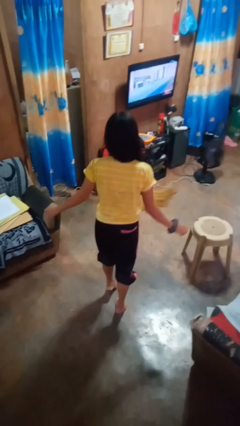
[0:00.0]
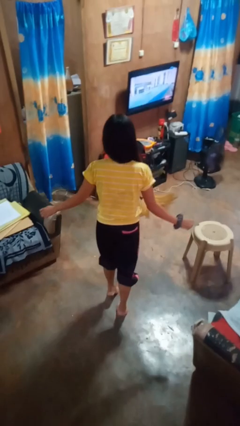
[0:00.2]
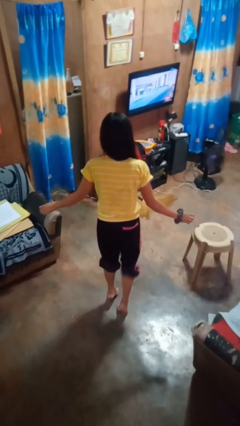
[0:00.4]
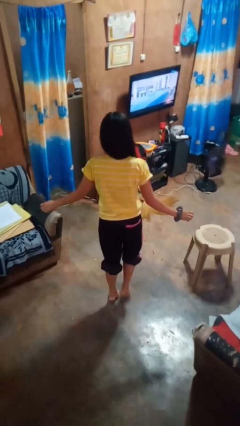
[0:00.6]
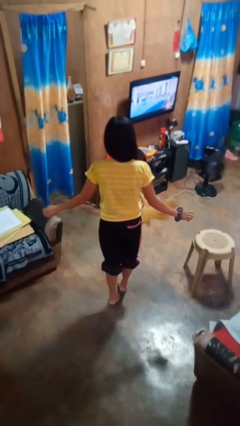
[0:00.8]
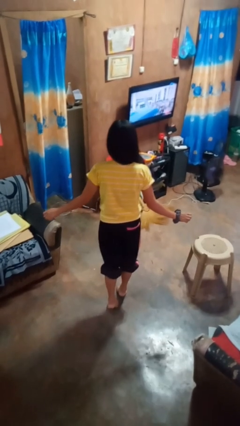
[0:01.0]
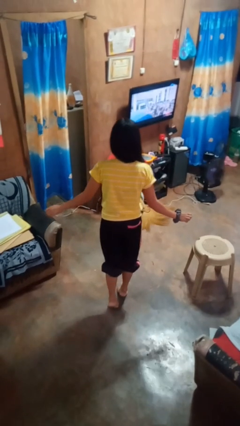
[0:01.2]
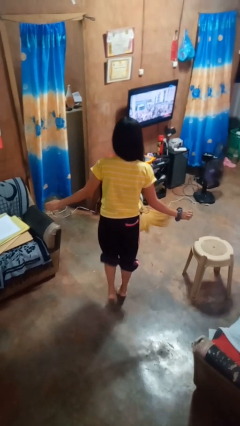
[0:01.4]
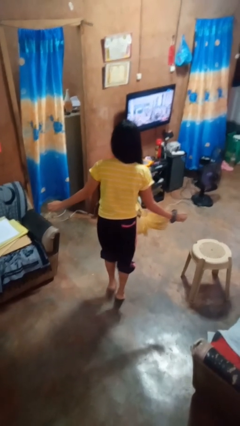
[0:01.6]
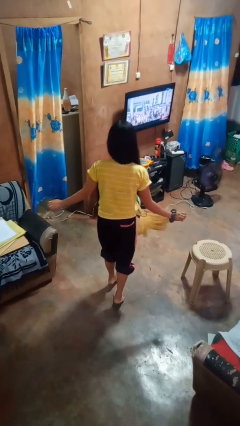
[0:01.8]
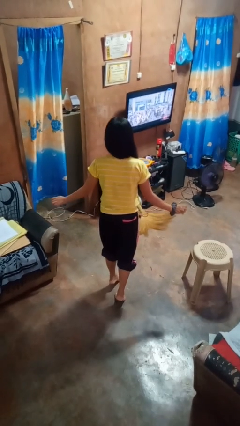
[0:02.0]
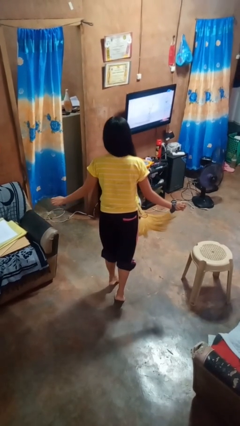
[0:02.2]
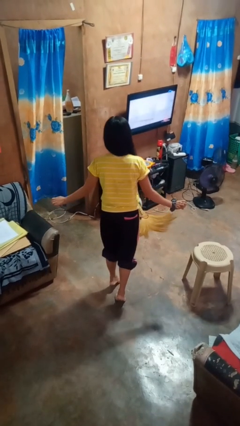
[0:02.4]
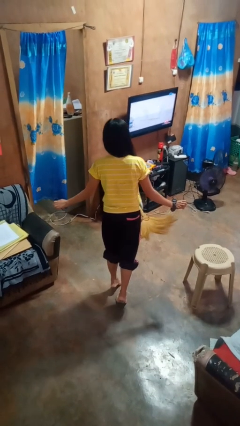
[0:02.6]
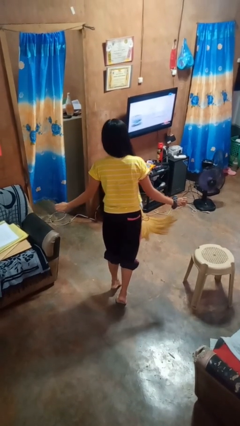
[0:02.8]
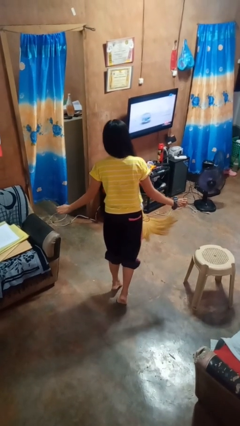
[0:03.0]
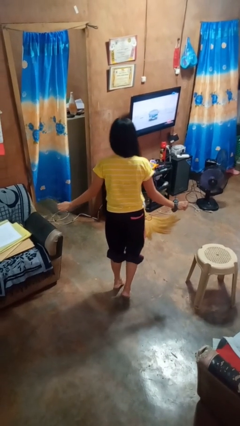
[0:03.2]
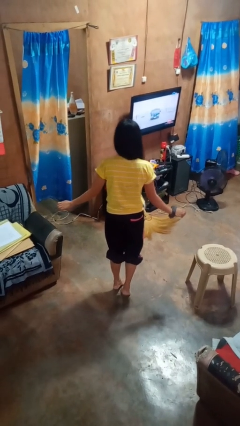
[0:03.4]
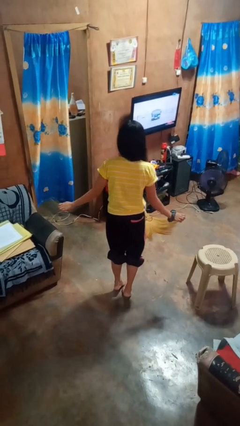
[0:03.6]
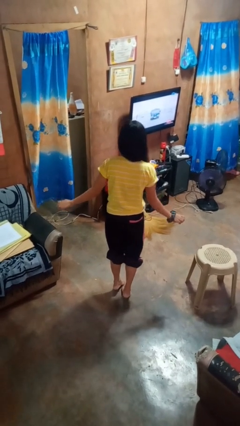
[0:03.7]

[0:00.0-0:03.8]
person walks tiptoe

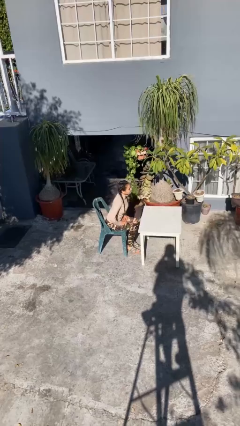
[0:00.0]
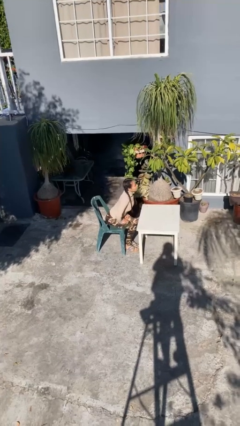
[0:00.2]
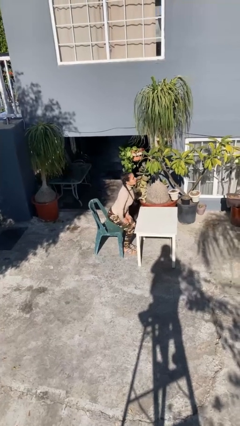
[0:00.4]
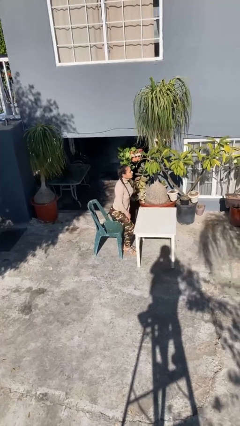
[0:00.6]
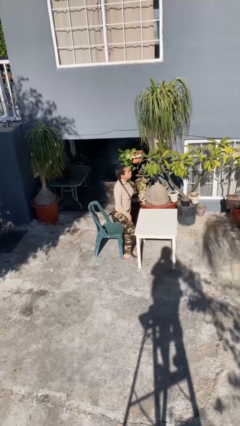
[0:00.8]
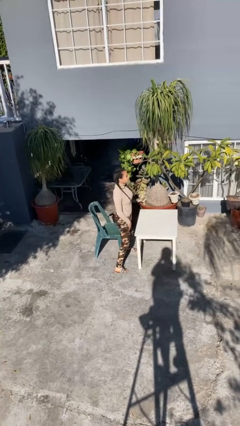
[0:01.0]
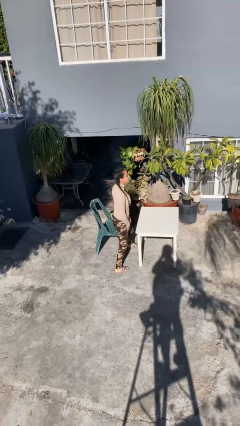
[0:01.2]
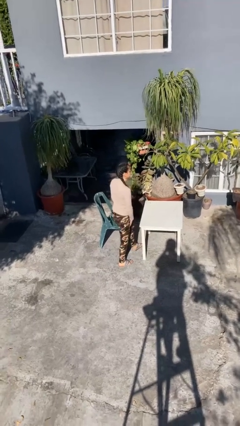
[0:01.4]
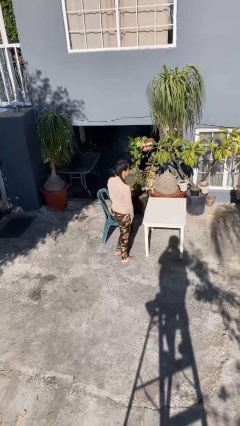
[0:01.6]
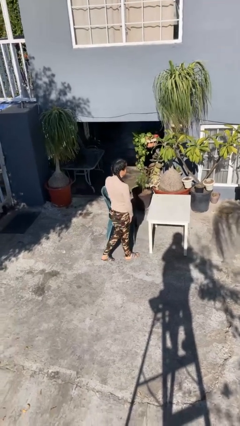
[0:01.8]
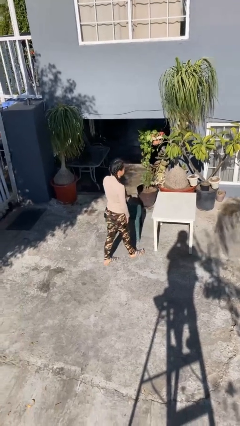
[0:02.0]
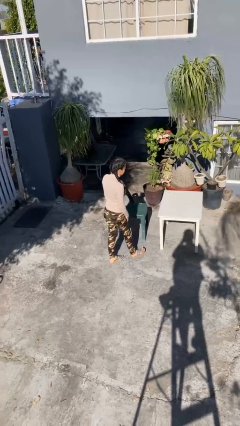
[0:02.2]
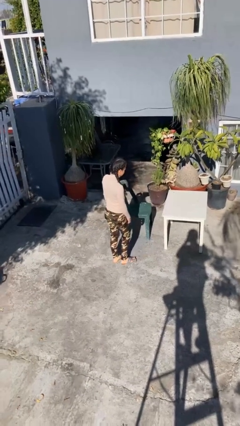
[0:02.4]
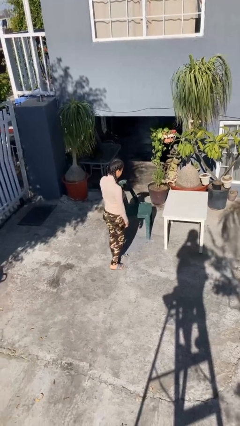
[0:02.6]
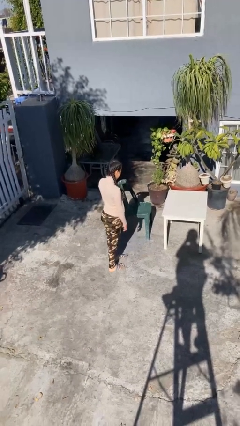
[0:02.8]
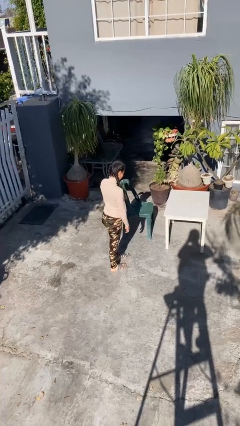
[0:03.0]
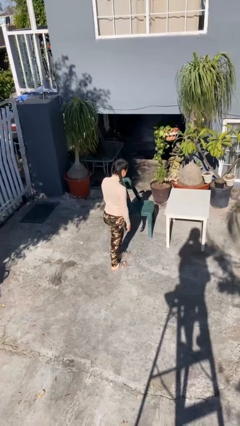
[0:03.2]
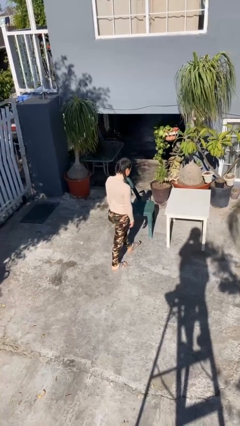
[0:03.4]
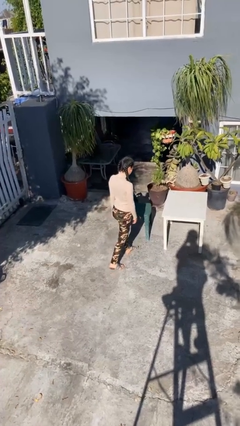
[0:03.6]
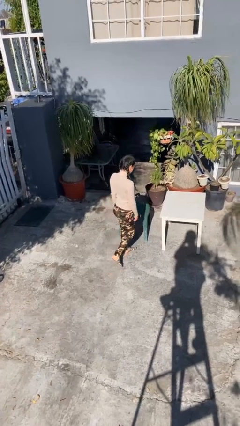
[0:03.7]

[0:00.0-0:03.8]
person stands up

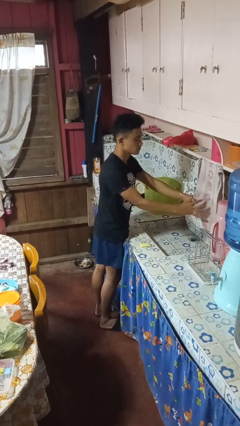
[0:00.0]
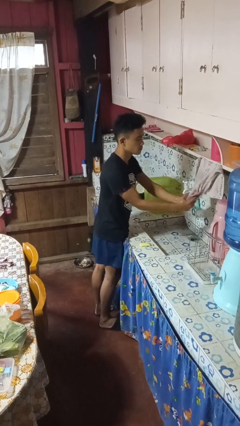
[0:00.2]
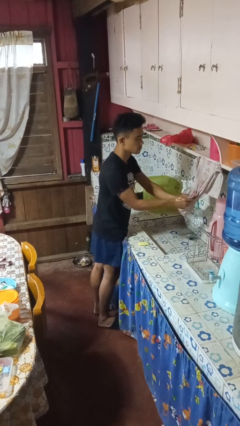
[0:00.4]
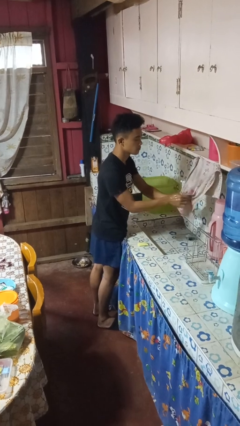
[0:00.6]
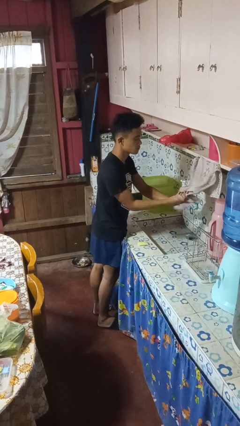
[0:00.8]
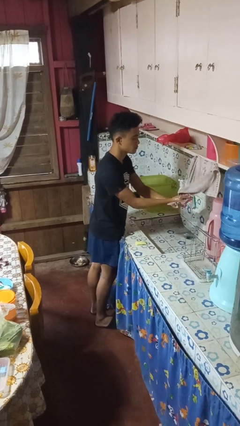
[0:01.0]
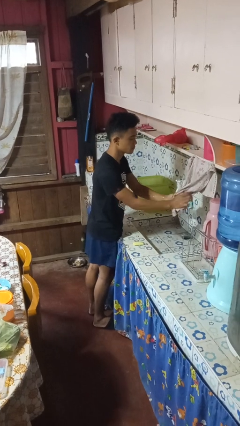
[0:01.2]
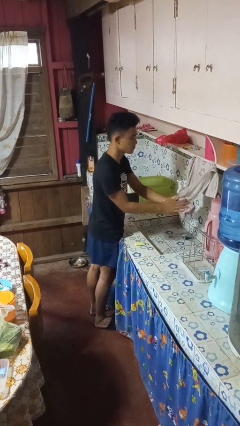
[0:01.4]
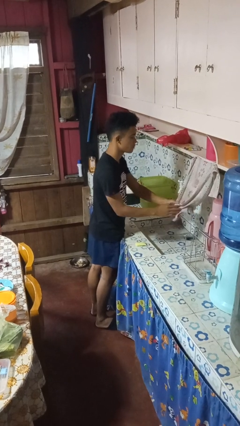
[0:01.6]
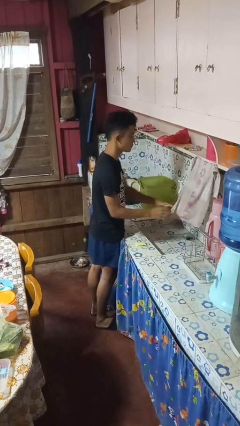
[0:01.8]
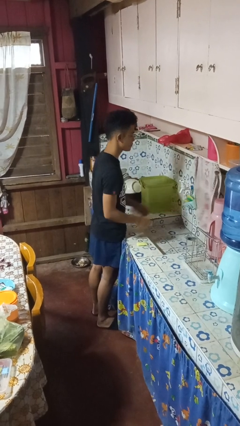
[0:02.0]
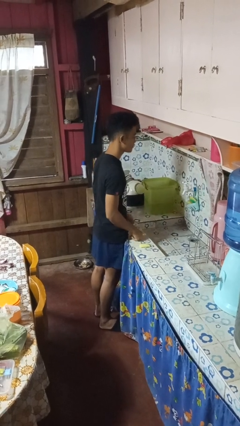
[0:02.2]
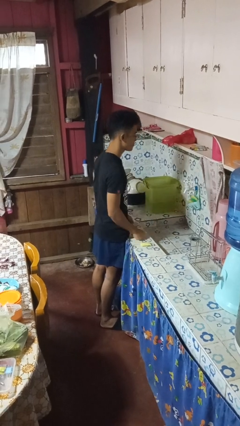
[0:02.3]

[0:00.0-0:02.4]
person dries hands with towel

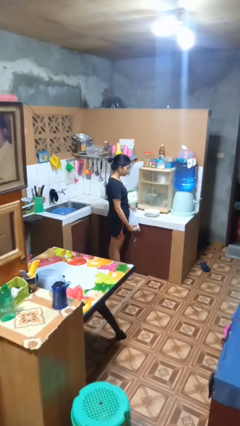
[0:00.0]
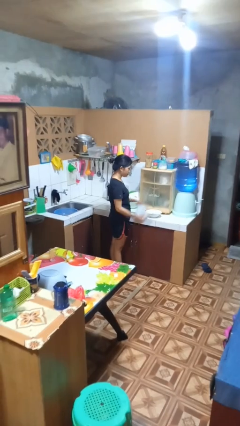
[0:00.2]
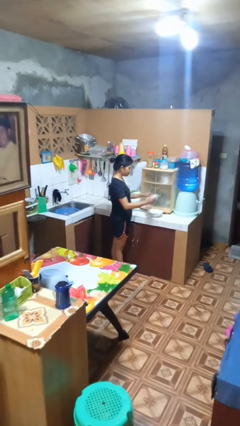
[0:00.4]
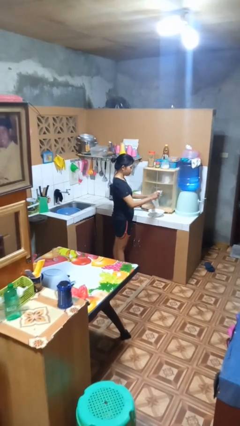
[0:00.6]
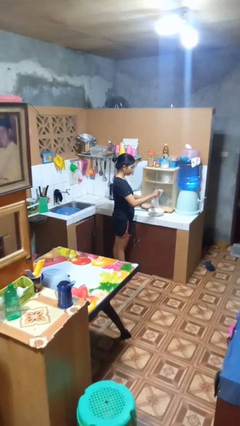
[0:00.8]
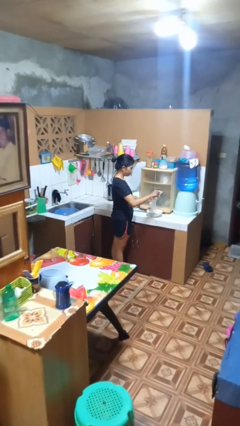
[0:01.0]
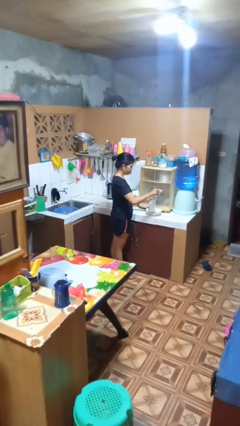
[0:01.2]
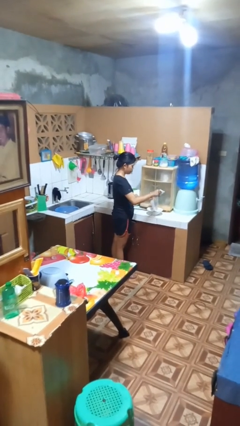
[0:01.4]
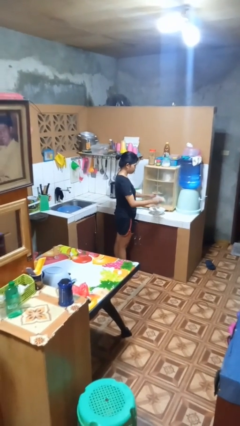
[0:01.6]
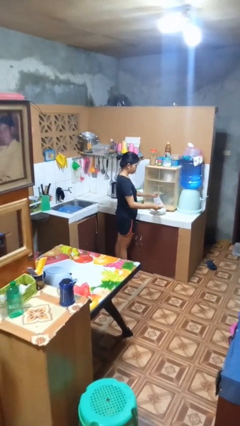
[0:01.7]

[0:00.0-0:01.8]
person pours into bowl

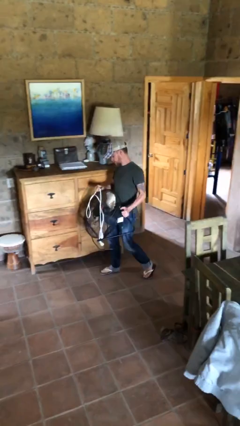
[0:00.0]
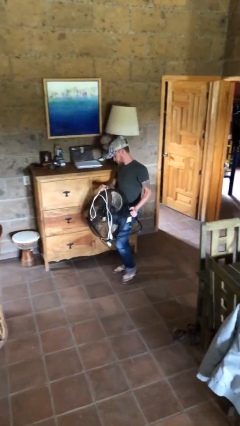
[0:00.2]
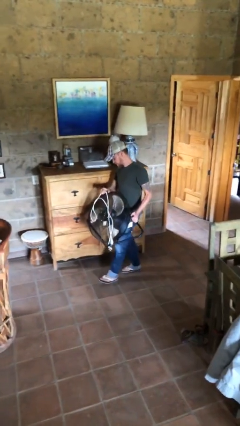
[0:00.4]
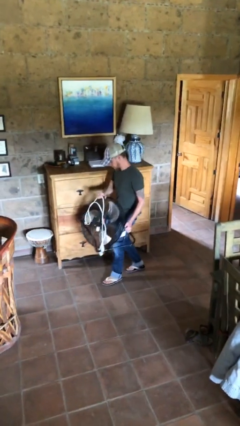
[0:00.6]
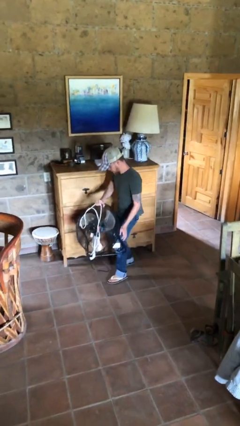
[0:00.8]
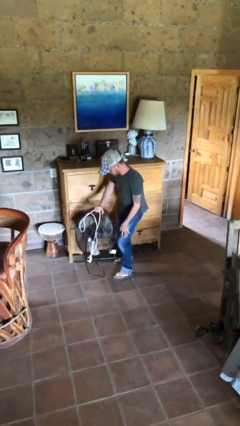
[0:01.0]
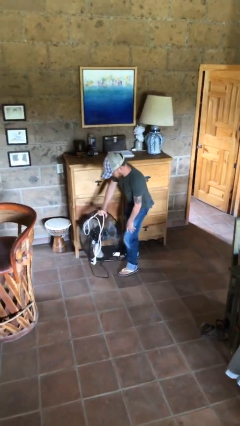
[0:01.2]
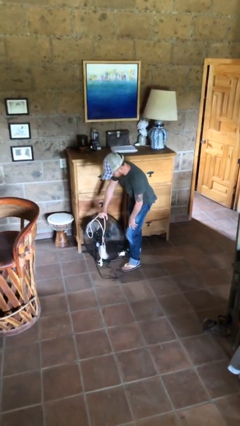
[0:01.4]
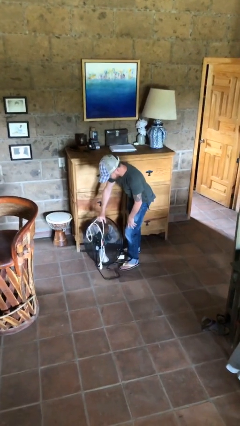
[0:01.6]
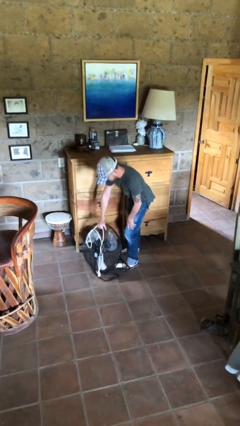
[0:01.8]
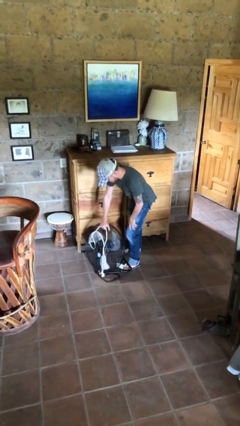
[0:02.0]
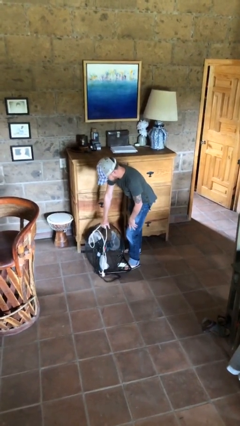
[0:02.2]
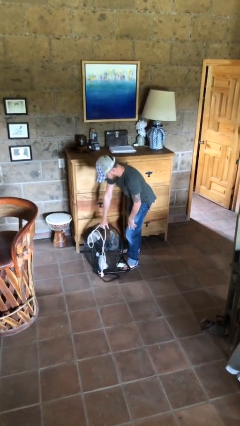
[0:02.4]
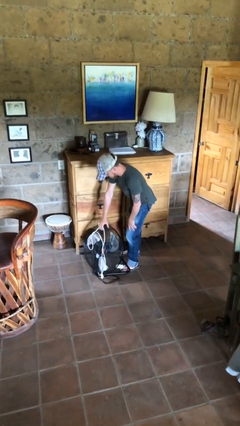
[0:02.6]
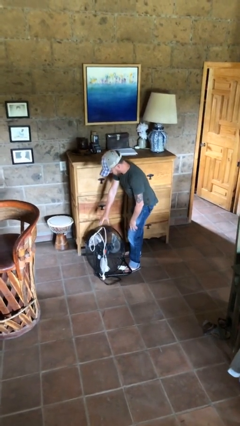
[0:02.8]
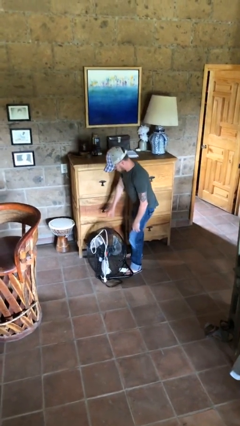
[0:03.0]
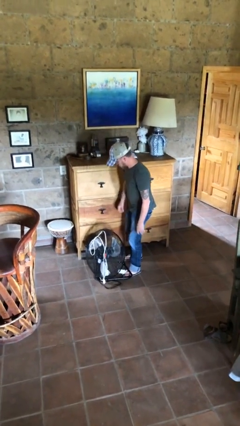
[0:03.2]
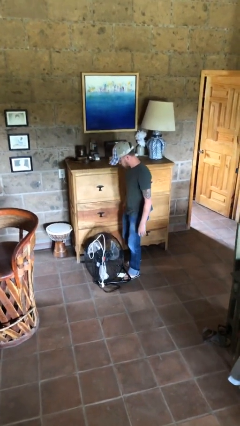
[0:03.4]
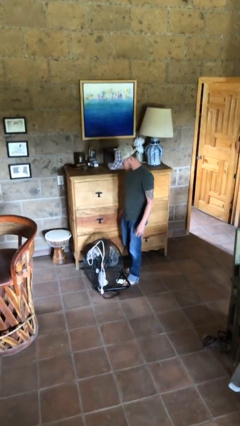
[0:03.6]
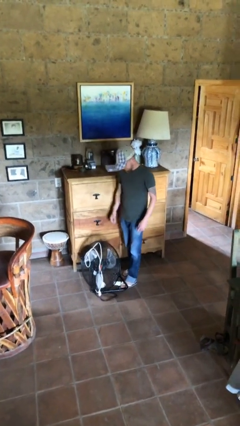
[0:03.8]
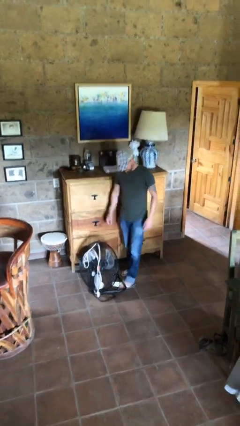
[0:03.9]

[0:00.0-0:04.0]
person puts down object on floor

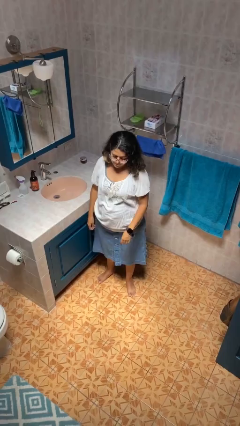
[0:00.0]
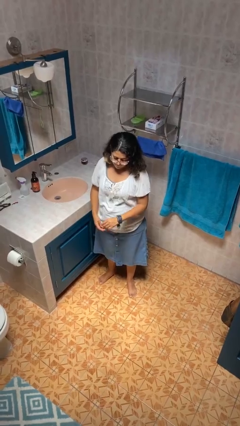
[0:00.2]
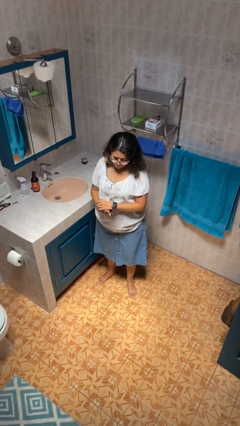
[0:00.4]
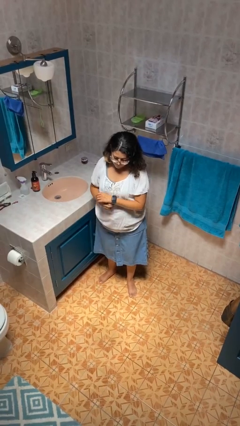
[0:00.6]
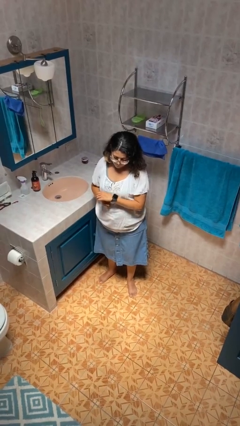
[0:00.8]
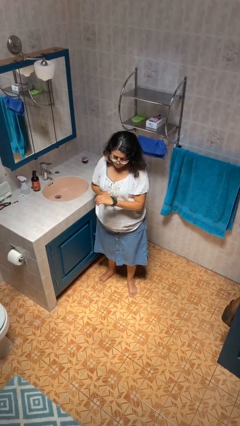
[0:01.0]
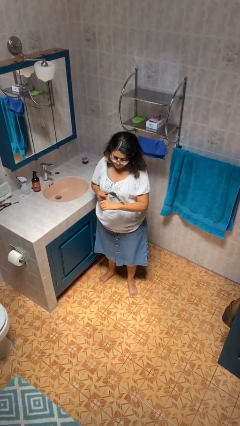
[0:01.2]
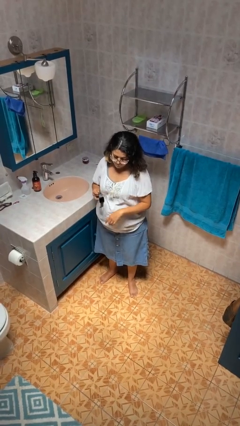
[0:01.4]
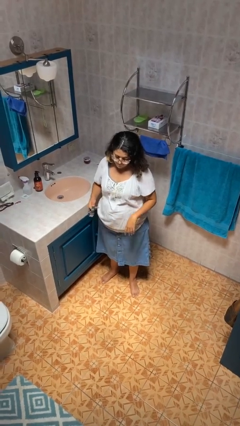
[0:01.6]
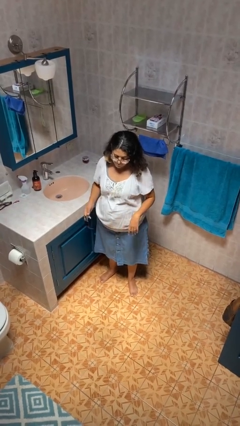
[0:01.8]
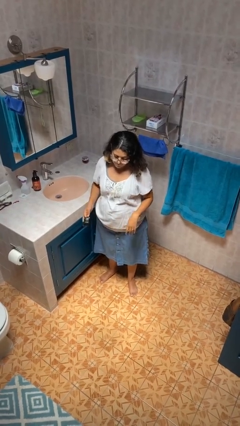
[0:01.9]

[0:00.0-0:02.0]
person takes off wristwatch
